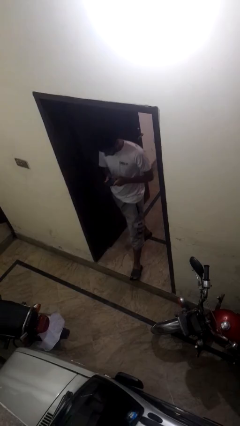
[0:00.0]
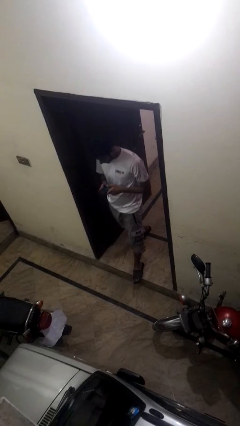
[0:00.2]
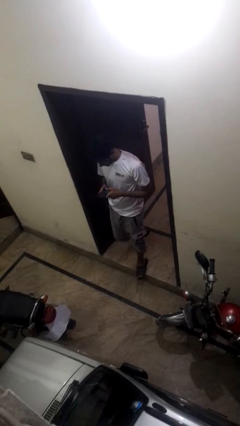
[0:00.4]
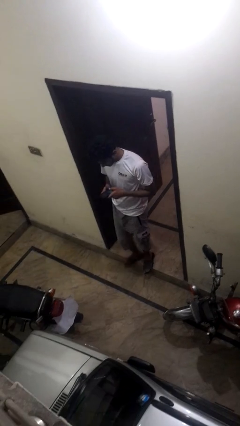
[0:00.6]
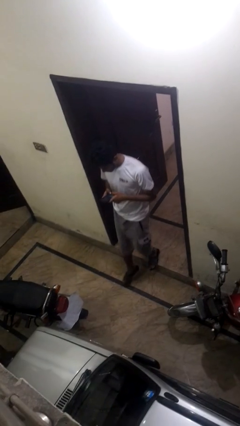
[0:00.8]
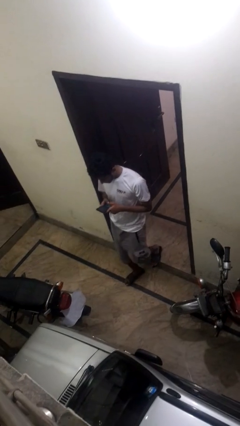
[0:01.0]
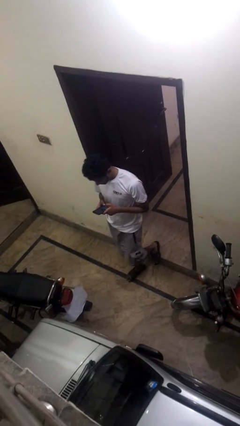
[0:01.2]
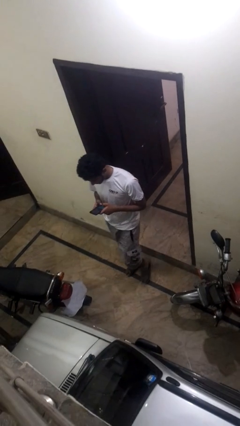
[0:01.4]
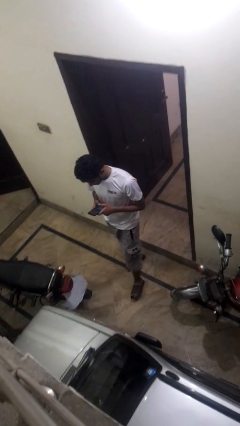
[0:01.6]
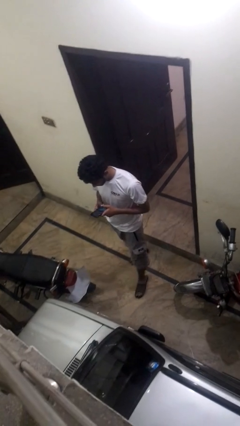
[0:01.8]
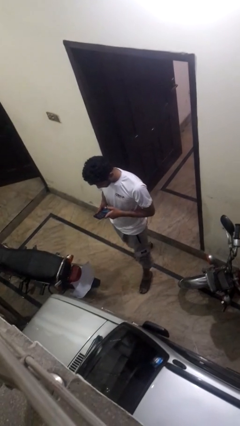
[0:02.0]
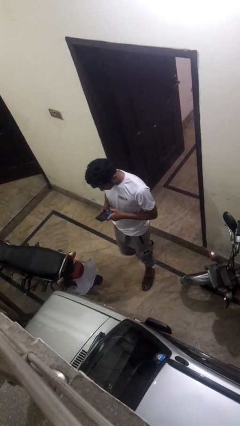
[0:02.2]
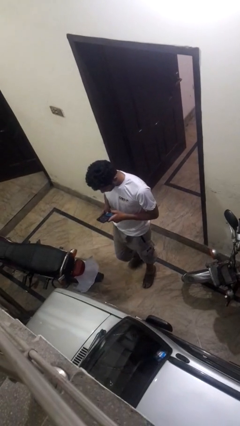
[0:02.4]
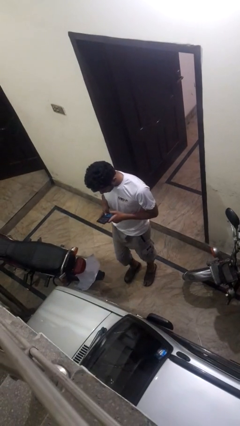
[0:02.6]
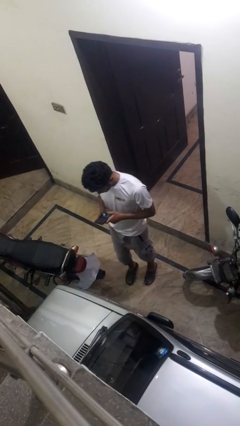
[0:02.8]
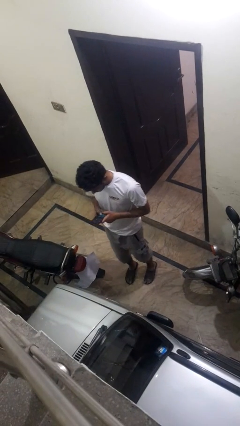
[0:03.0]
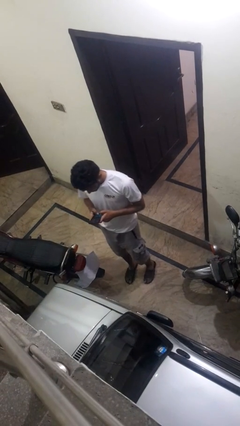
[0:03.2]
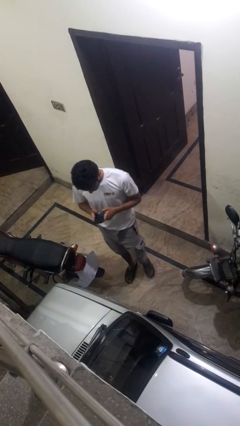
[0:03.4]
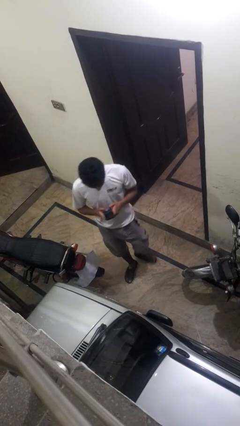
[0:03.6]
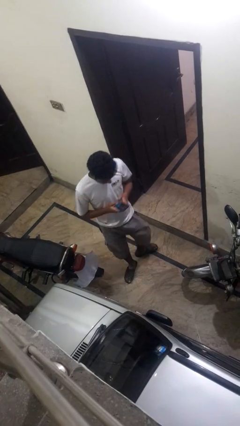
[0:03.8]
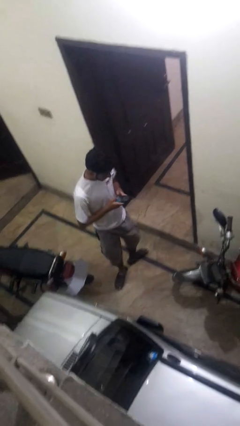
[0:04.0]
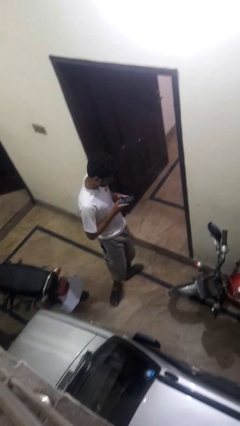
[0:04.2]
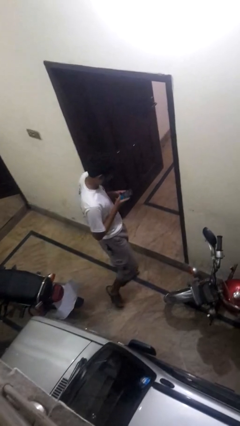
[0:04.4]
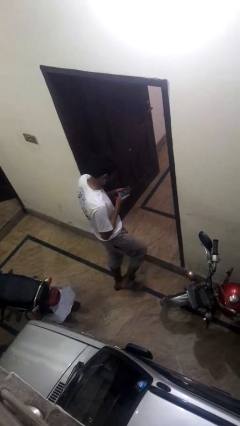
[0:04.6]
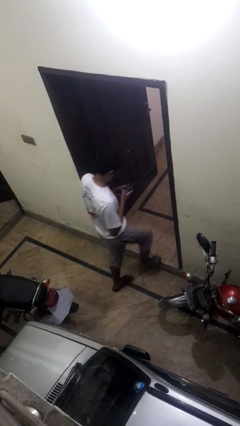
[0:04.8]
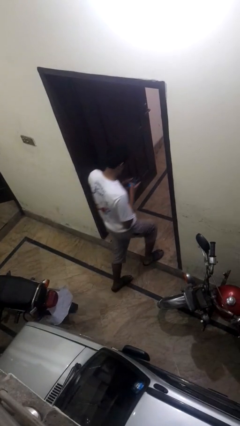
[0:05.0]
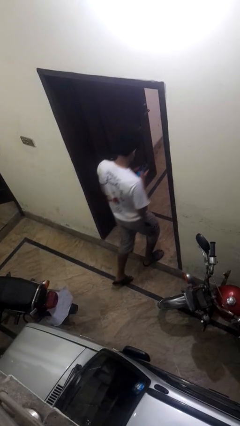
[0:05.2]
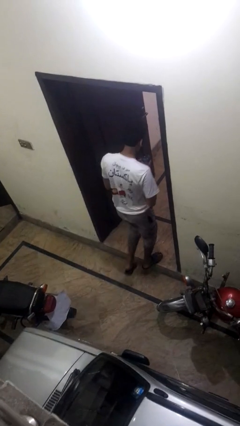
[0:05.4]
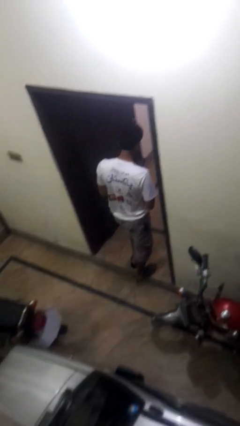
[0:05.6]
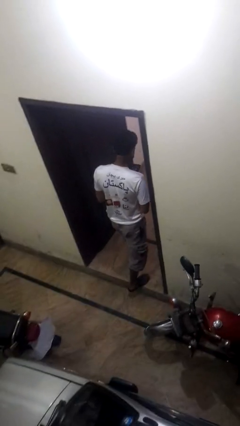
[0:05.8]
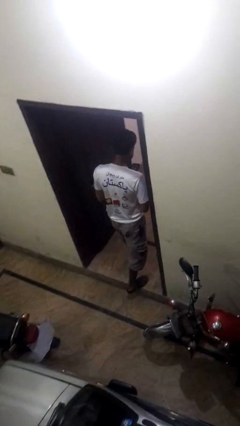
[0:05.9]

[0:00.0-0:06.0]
person enters scene through structure

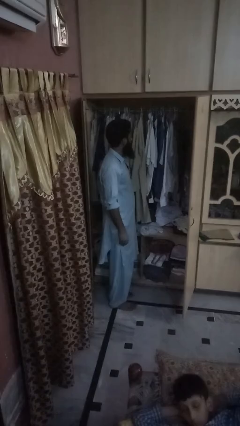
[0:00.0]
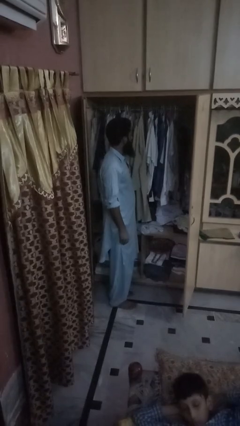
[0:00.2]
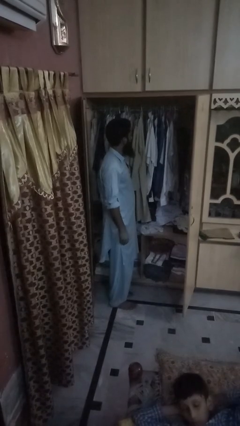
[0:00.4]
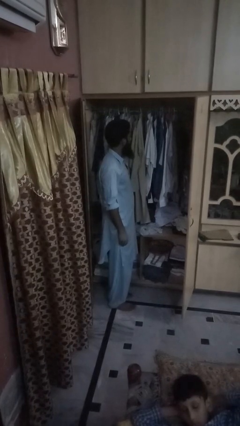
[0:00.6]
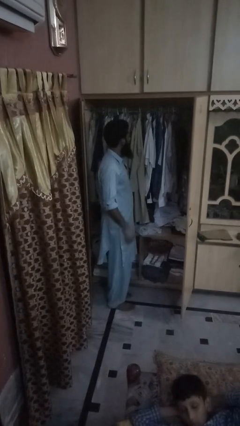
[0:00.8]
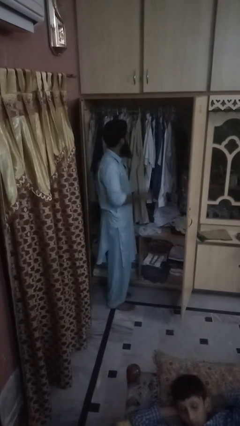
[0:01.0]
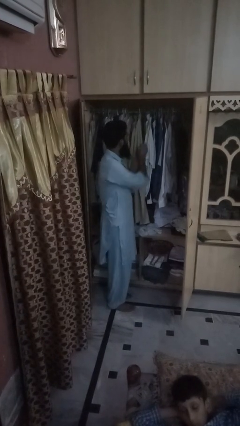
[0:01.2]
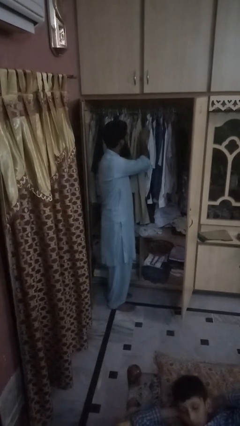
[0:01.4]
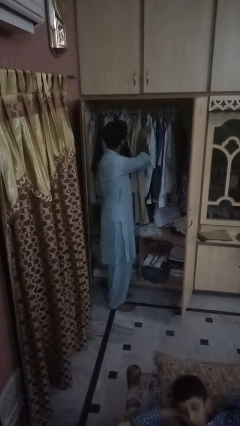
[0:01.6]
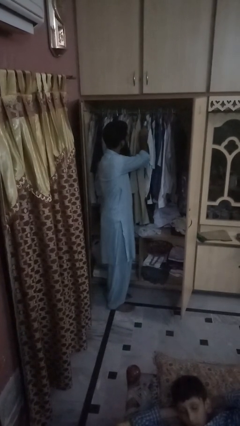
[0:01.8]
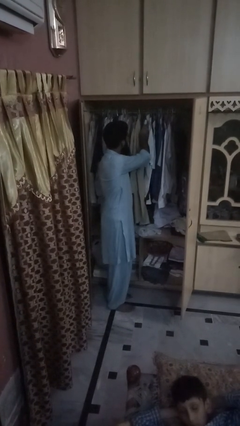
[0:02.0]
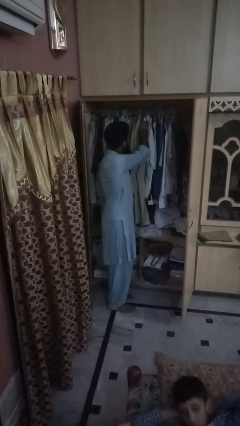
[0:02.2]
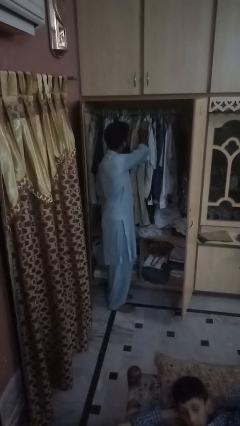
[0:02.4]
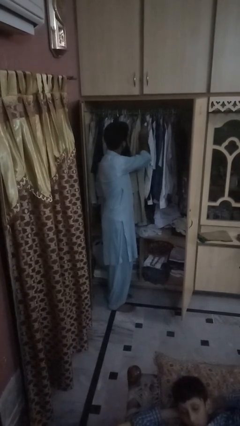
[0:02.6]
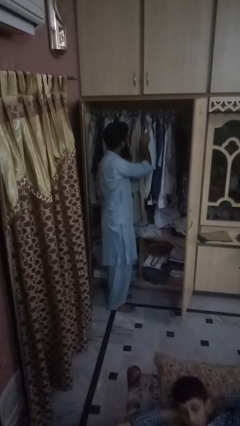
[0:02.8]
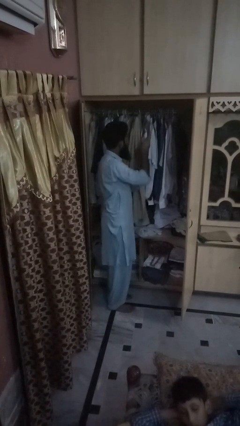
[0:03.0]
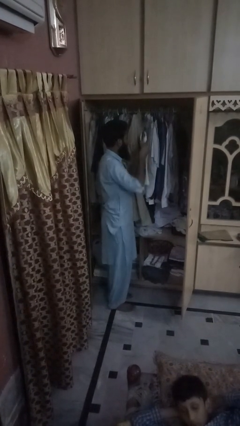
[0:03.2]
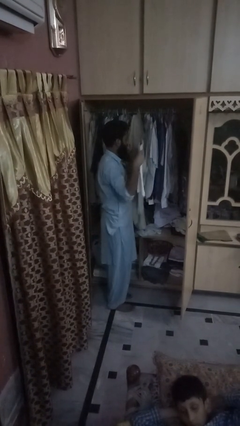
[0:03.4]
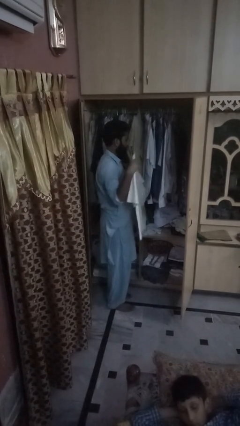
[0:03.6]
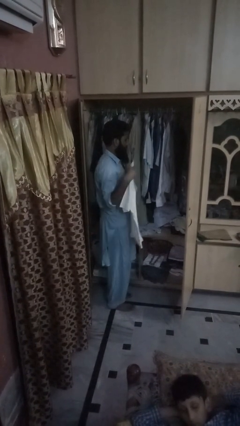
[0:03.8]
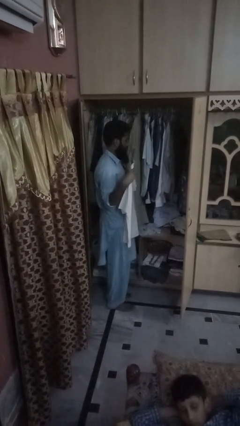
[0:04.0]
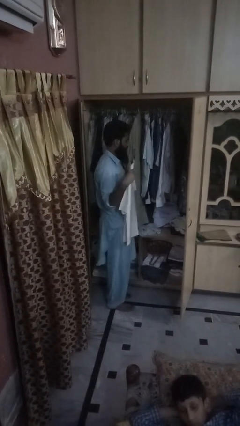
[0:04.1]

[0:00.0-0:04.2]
person puts clothes into closet

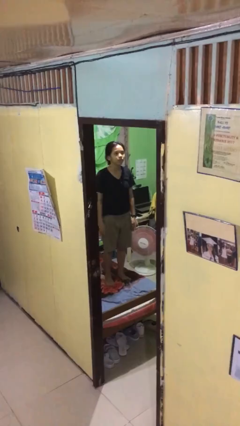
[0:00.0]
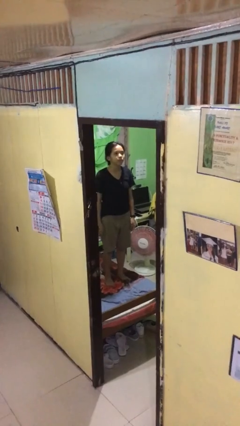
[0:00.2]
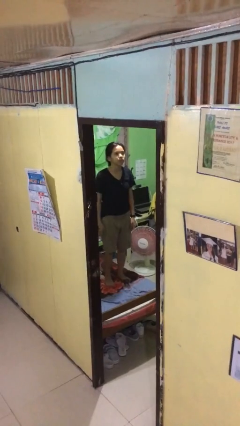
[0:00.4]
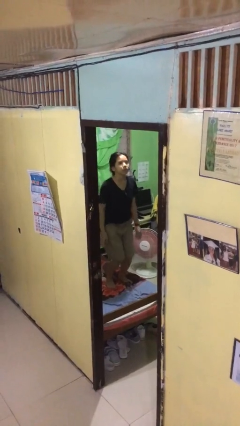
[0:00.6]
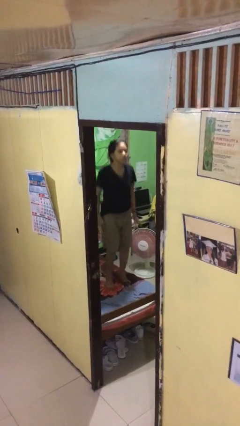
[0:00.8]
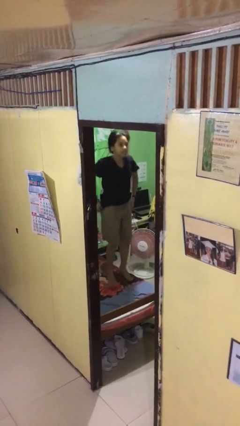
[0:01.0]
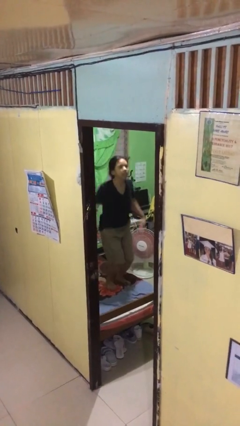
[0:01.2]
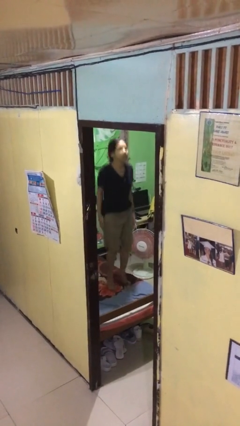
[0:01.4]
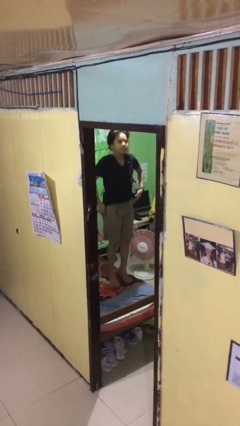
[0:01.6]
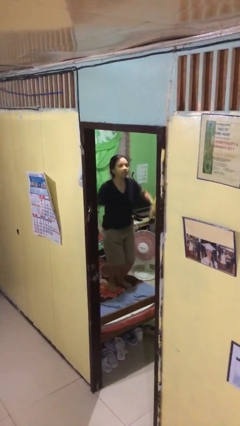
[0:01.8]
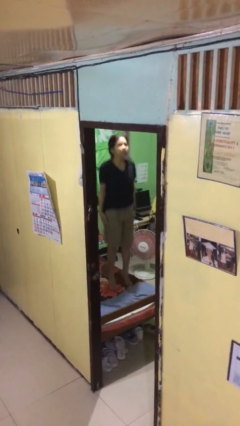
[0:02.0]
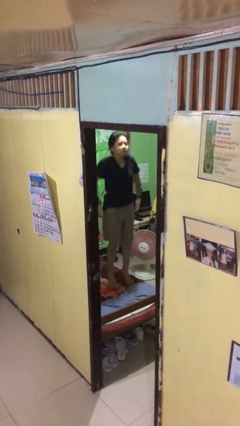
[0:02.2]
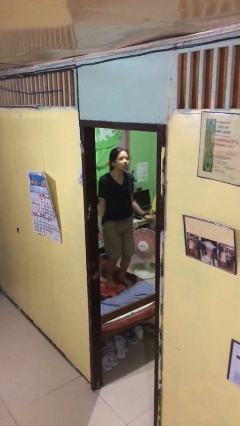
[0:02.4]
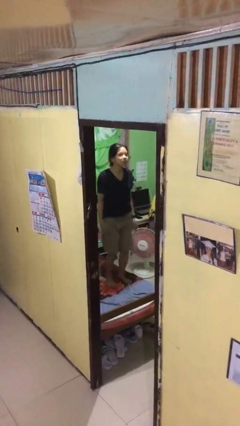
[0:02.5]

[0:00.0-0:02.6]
person jumps on bed

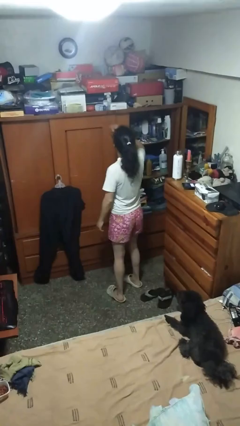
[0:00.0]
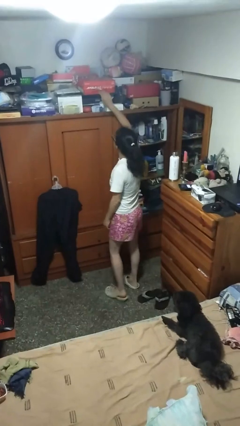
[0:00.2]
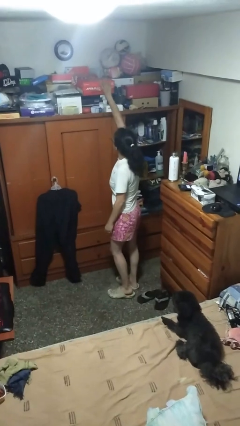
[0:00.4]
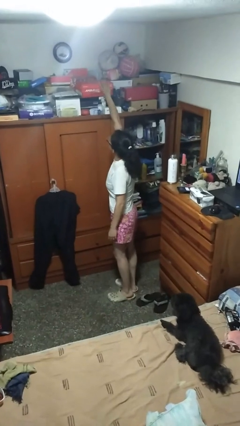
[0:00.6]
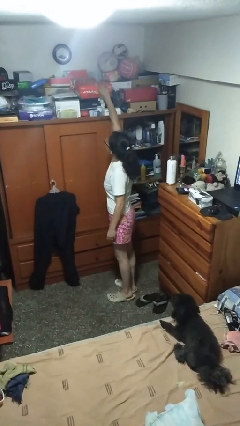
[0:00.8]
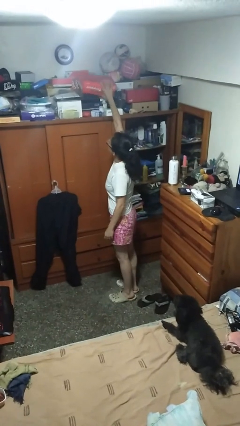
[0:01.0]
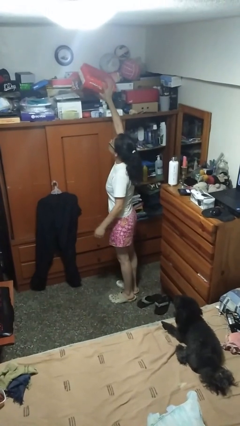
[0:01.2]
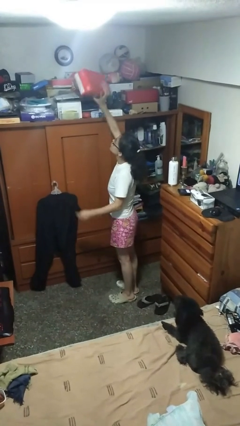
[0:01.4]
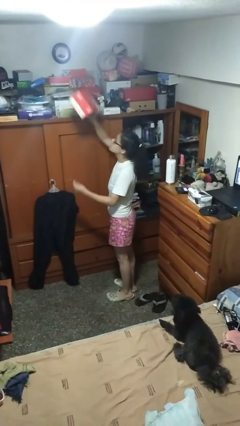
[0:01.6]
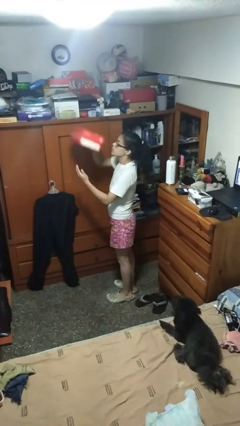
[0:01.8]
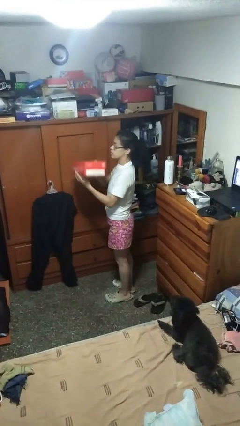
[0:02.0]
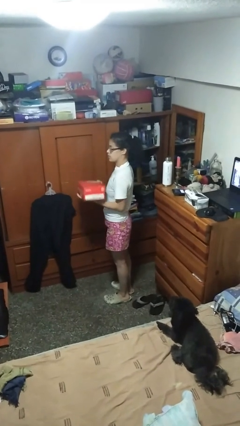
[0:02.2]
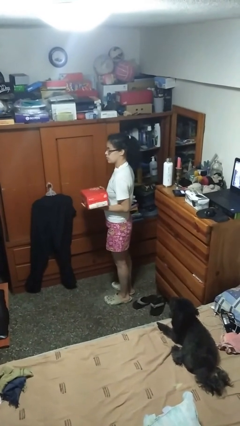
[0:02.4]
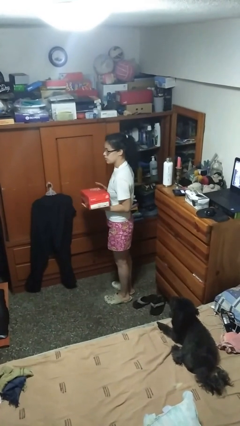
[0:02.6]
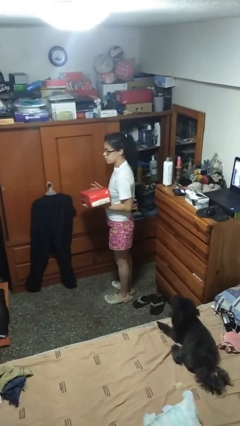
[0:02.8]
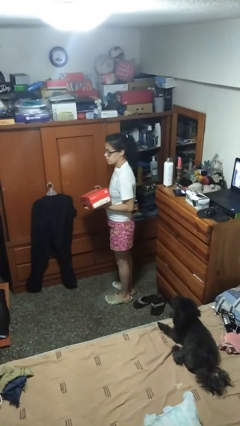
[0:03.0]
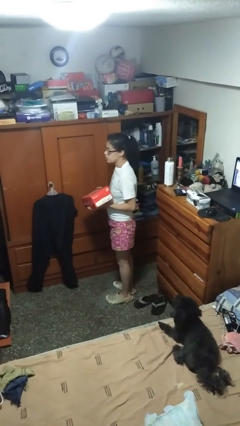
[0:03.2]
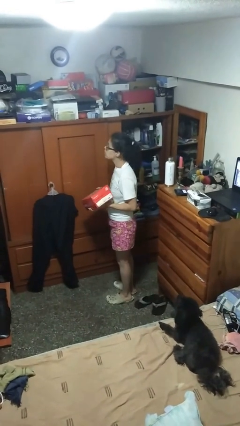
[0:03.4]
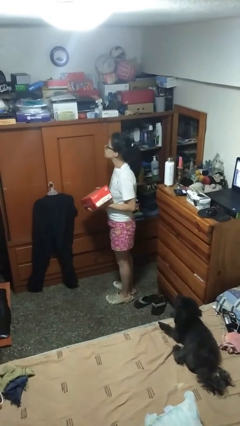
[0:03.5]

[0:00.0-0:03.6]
person picks up object from shelf

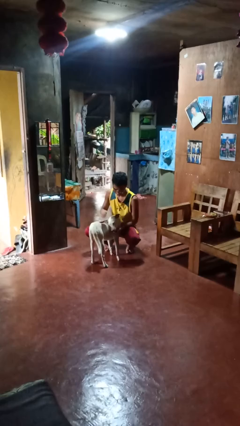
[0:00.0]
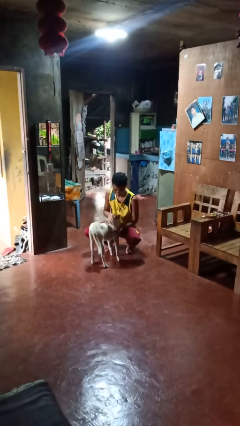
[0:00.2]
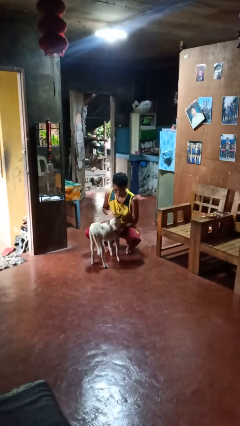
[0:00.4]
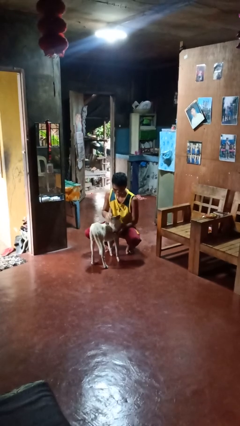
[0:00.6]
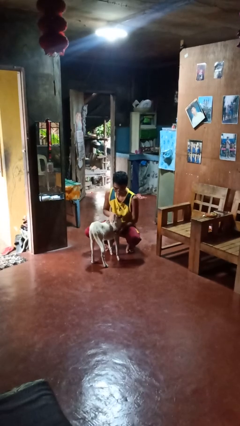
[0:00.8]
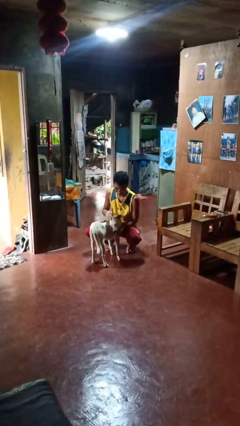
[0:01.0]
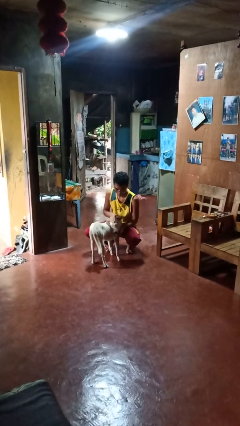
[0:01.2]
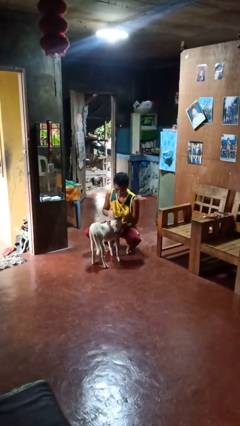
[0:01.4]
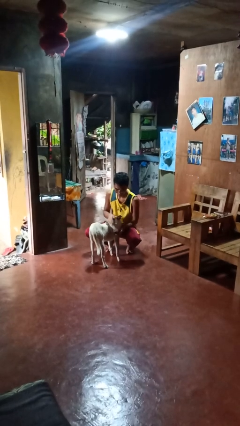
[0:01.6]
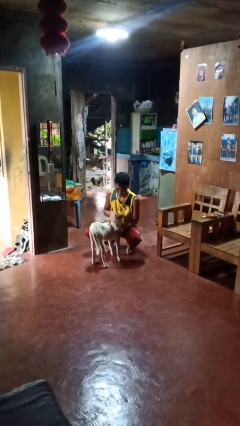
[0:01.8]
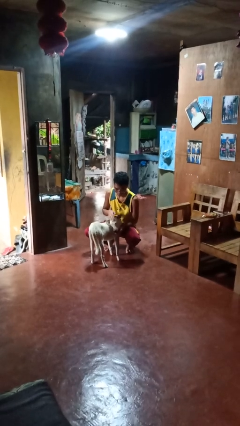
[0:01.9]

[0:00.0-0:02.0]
person pets dog
